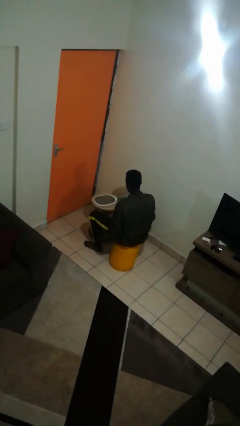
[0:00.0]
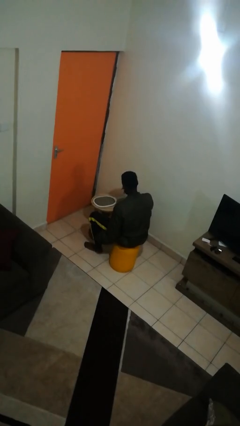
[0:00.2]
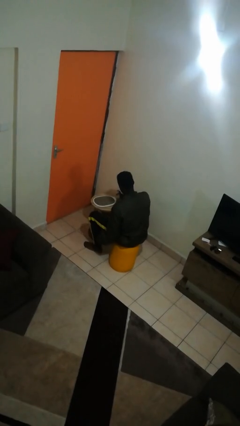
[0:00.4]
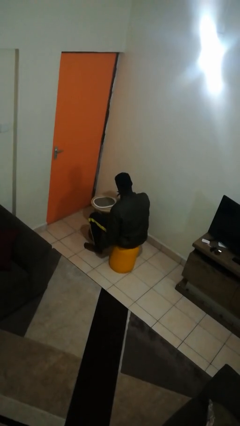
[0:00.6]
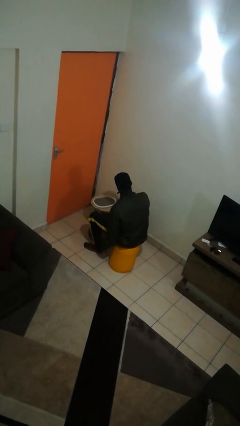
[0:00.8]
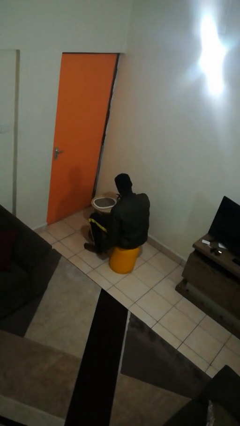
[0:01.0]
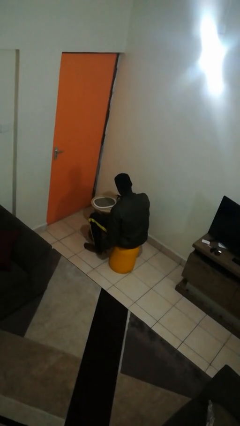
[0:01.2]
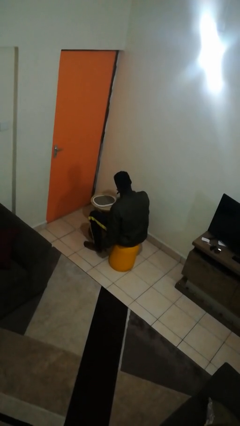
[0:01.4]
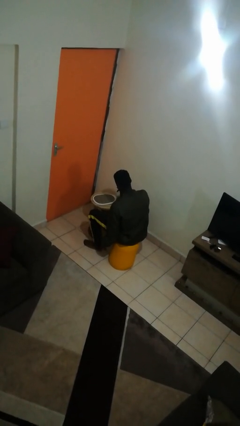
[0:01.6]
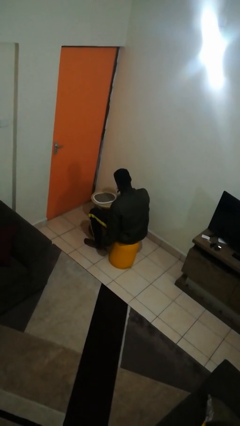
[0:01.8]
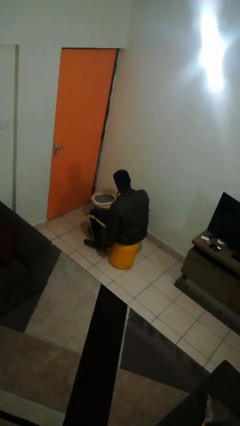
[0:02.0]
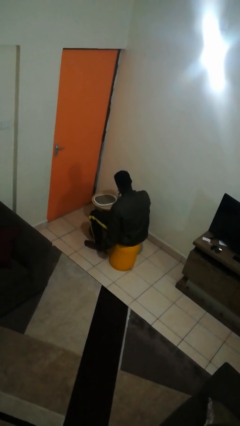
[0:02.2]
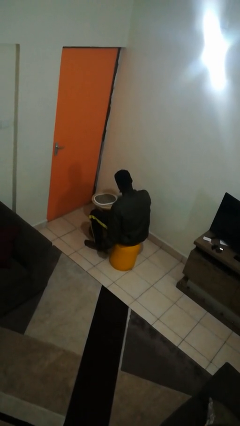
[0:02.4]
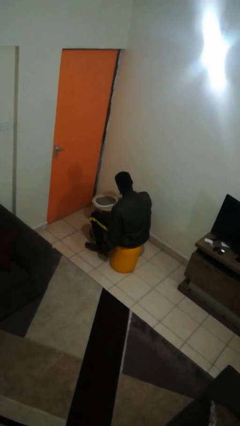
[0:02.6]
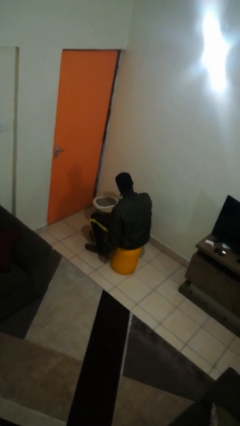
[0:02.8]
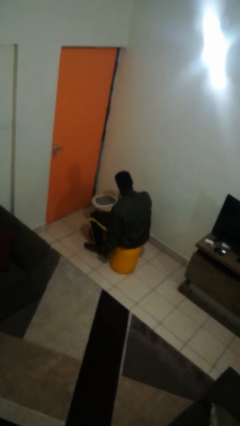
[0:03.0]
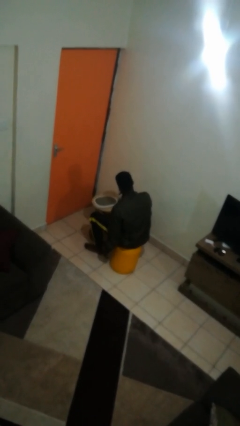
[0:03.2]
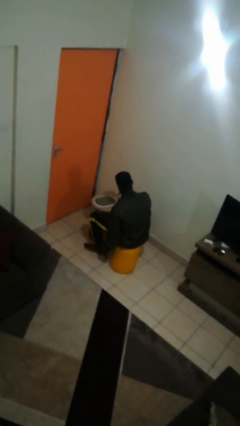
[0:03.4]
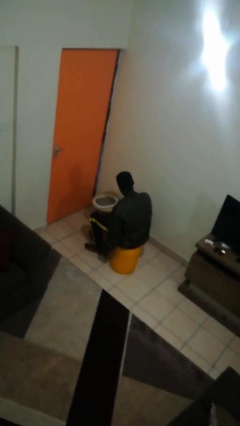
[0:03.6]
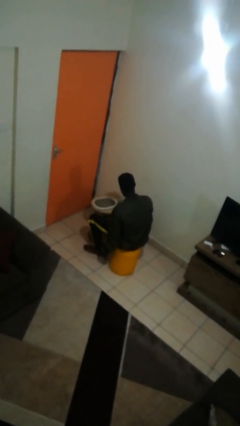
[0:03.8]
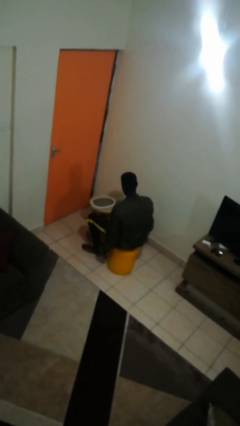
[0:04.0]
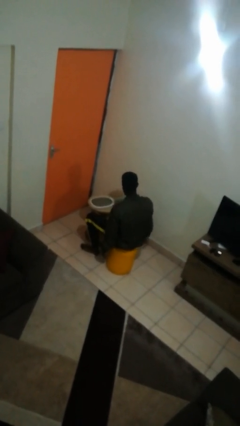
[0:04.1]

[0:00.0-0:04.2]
person taps object with finger

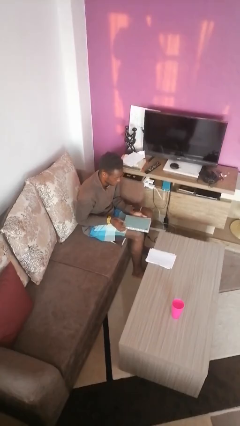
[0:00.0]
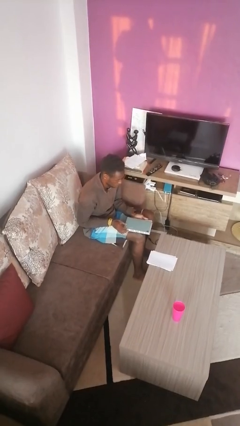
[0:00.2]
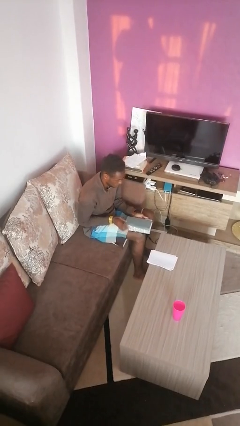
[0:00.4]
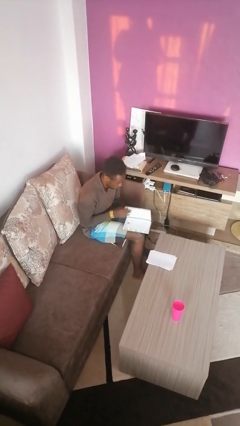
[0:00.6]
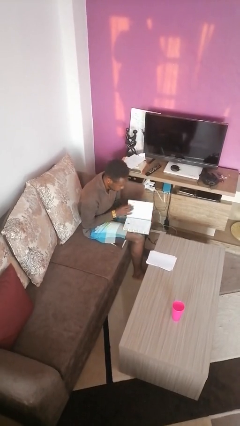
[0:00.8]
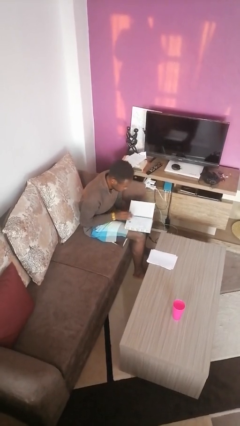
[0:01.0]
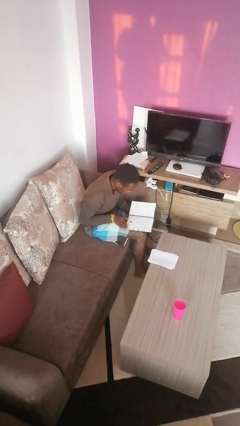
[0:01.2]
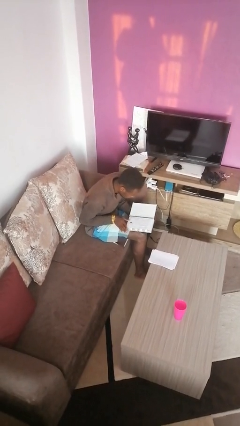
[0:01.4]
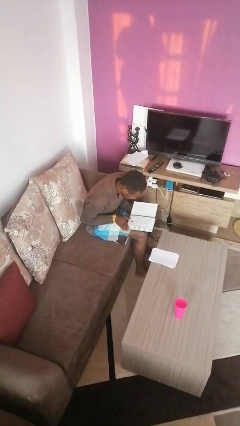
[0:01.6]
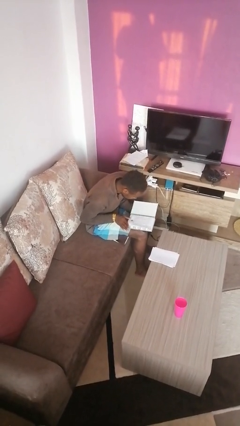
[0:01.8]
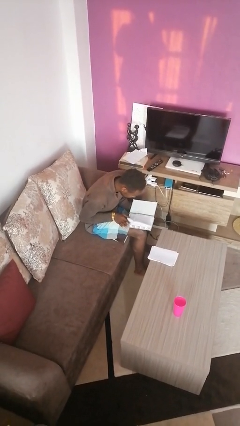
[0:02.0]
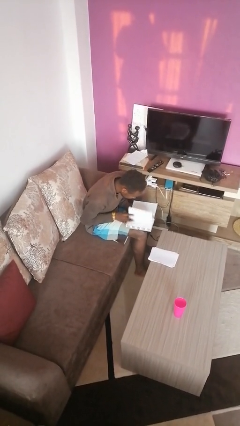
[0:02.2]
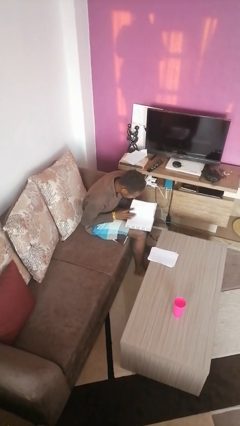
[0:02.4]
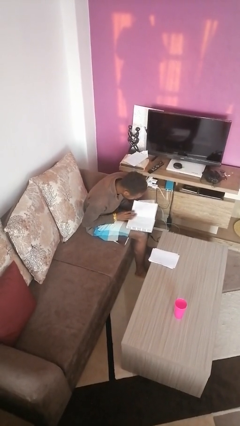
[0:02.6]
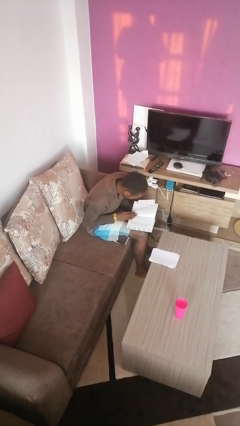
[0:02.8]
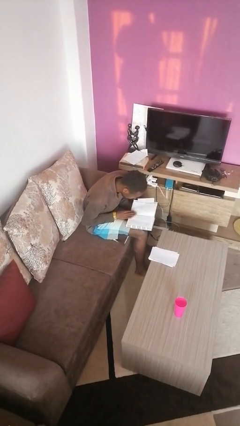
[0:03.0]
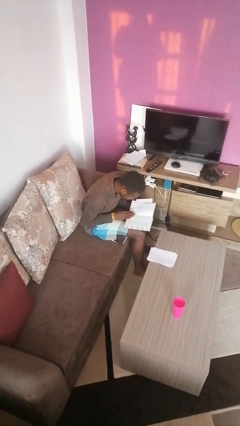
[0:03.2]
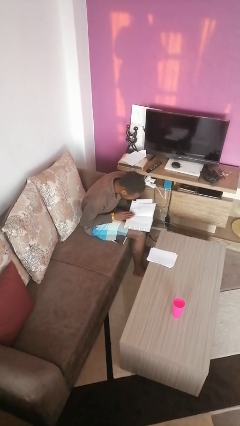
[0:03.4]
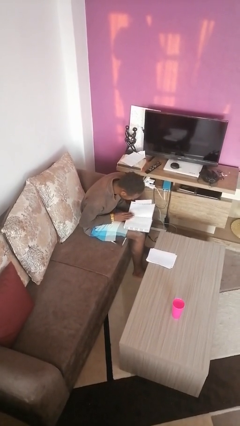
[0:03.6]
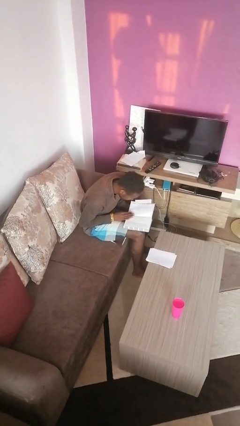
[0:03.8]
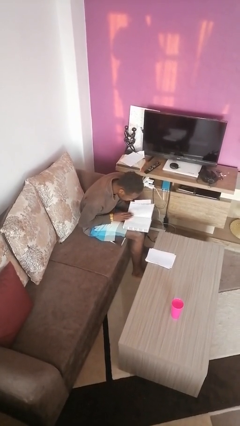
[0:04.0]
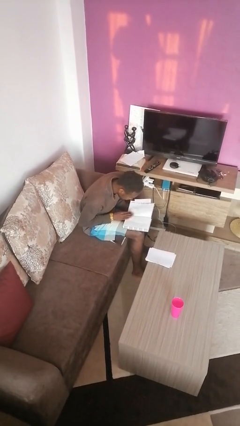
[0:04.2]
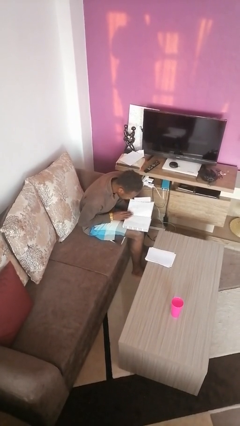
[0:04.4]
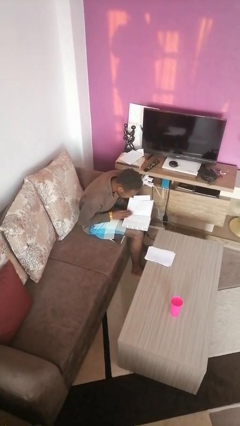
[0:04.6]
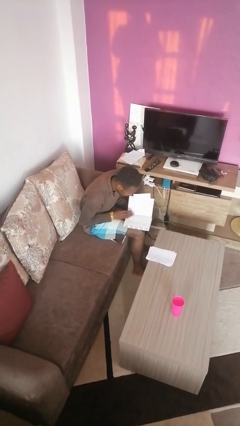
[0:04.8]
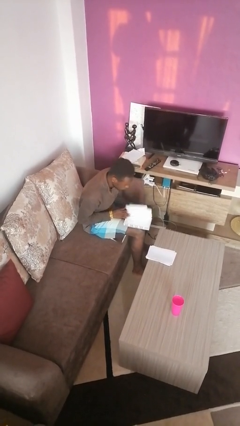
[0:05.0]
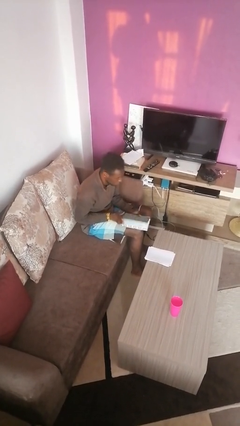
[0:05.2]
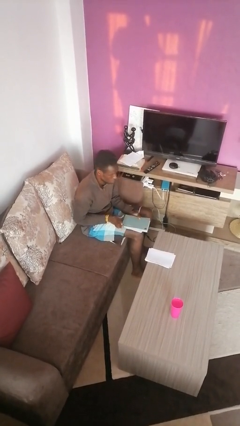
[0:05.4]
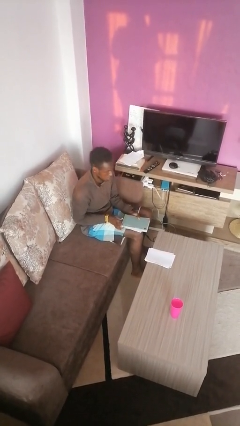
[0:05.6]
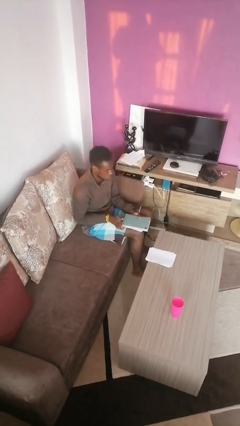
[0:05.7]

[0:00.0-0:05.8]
person reads book

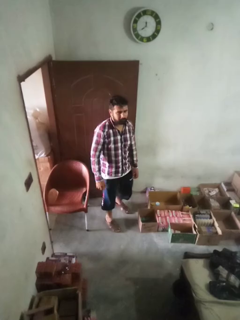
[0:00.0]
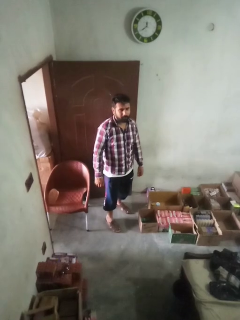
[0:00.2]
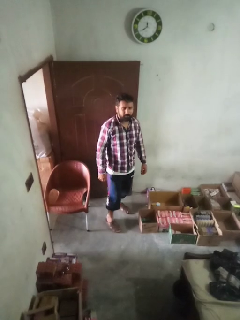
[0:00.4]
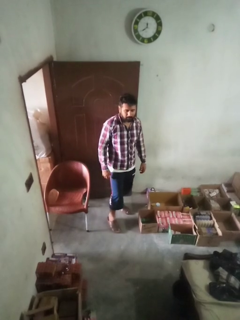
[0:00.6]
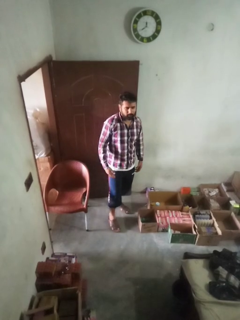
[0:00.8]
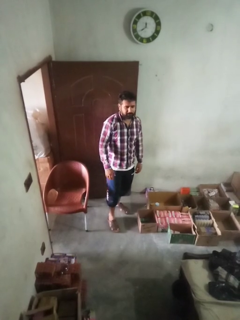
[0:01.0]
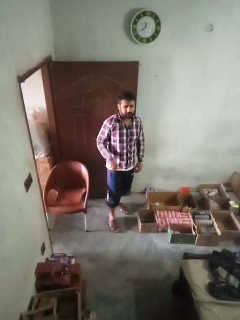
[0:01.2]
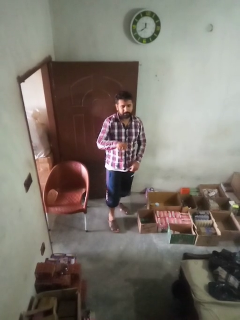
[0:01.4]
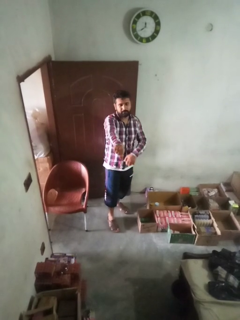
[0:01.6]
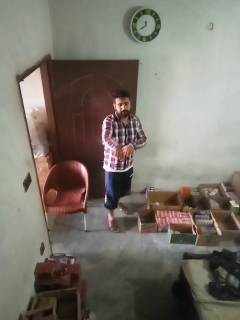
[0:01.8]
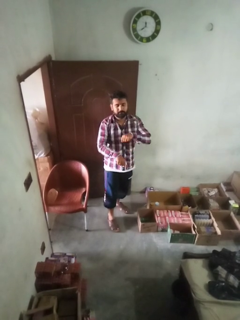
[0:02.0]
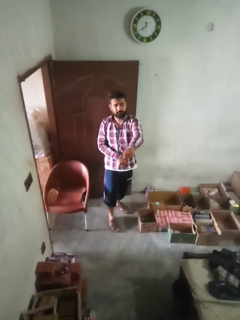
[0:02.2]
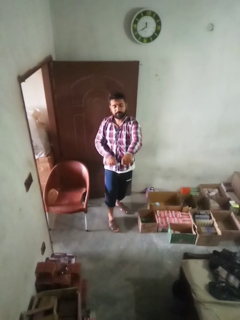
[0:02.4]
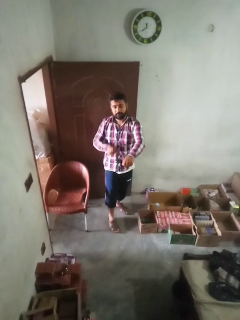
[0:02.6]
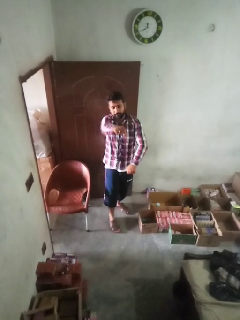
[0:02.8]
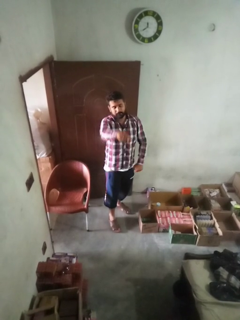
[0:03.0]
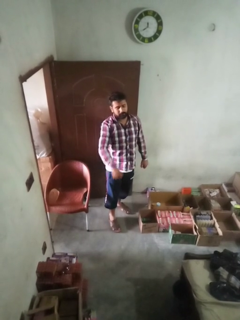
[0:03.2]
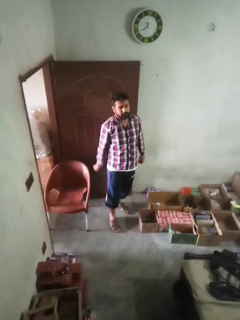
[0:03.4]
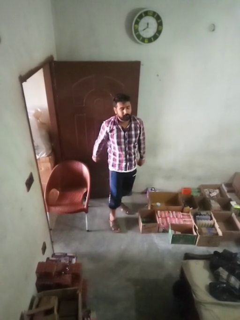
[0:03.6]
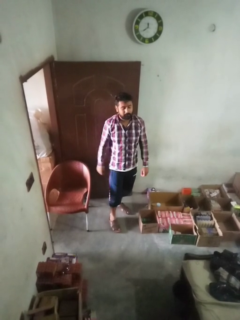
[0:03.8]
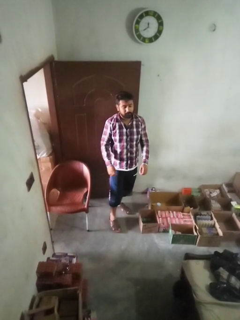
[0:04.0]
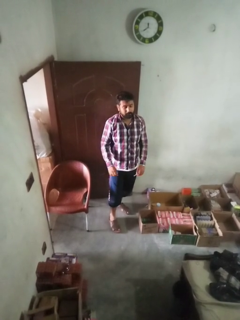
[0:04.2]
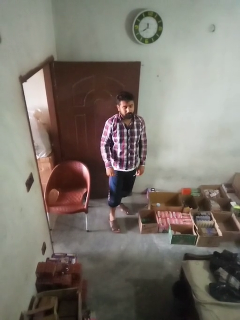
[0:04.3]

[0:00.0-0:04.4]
person karate chop

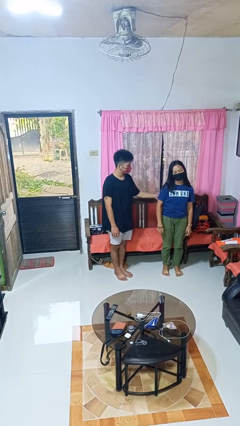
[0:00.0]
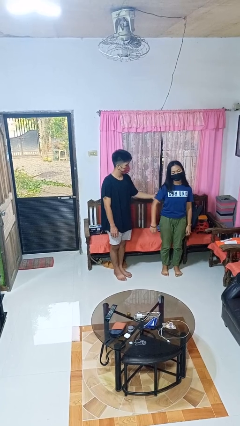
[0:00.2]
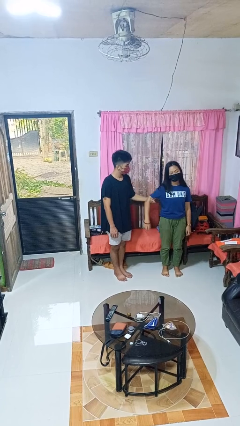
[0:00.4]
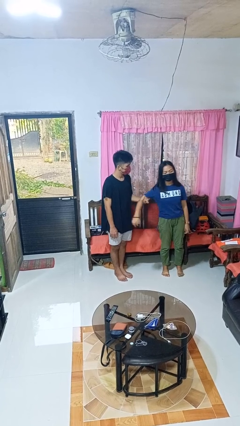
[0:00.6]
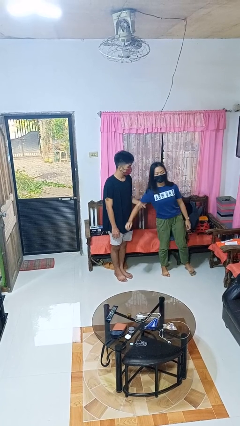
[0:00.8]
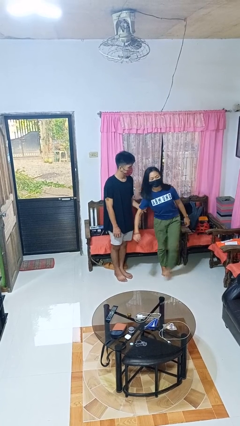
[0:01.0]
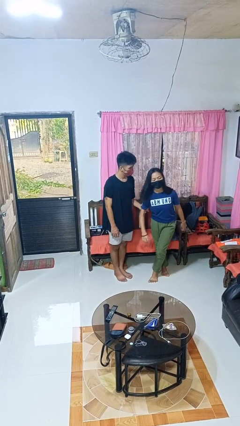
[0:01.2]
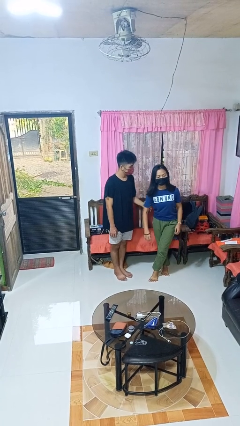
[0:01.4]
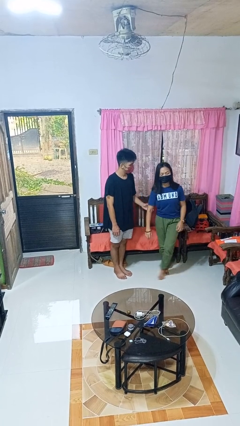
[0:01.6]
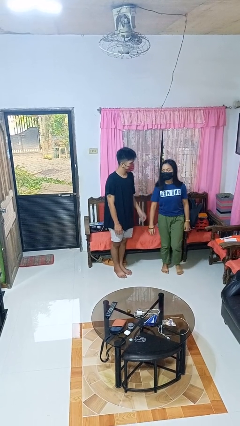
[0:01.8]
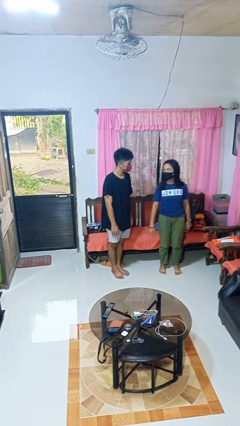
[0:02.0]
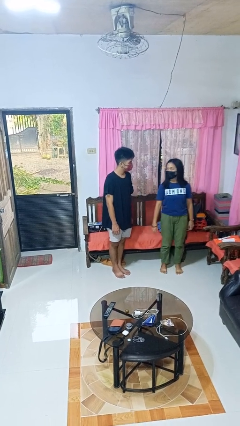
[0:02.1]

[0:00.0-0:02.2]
person grabs person by bicep

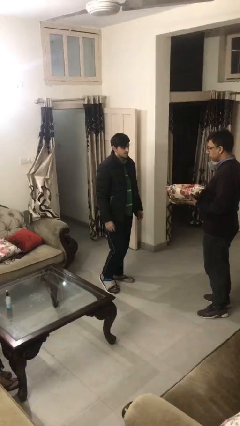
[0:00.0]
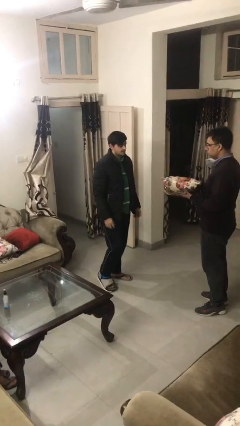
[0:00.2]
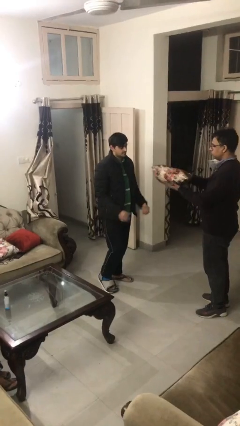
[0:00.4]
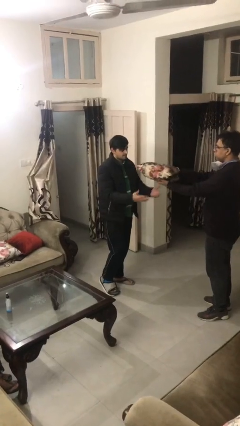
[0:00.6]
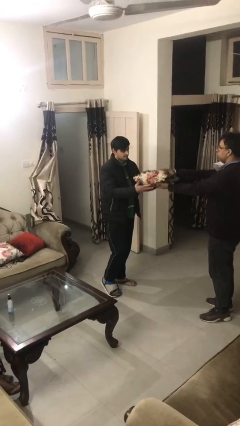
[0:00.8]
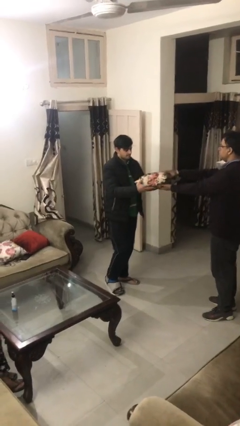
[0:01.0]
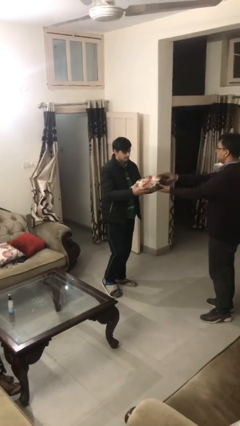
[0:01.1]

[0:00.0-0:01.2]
person transfers object to person

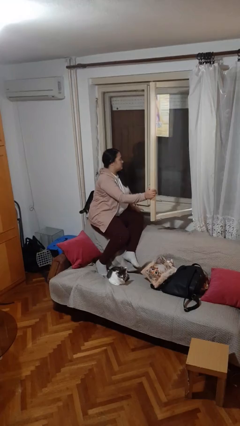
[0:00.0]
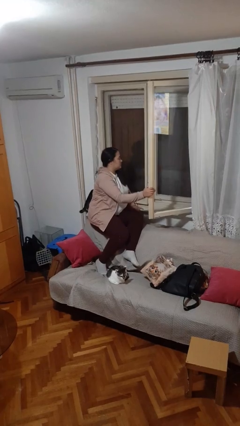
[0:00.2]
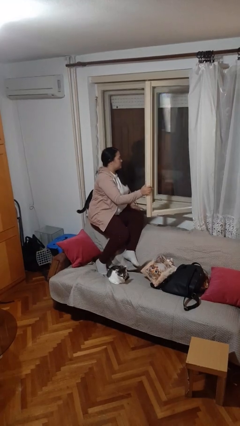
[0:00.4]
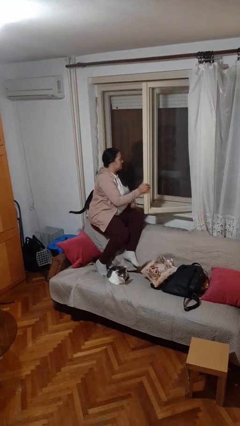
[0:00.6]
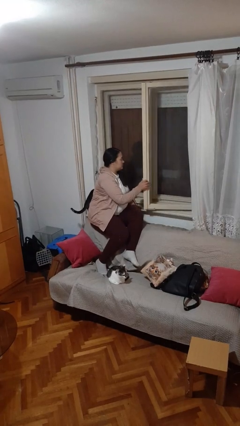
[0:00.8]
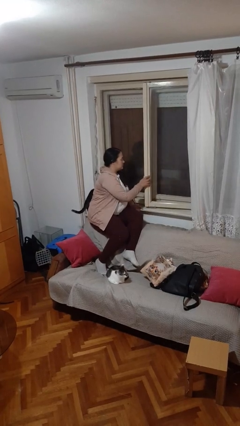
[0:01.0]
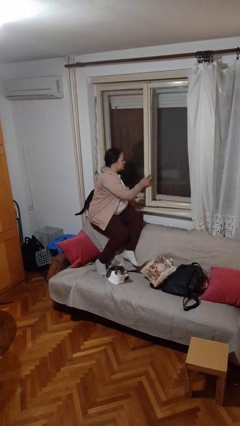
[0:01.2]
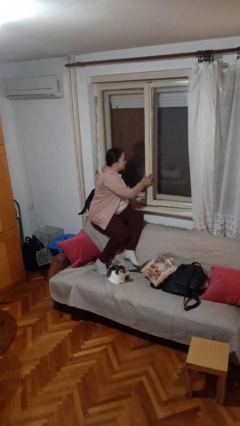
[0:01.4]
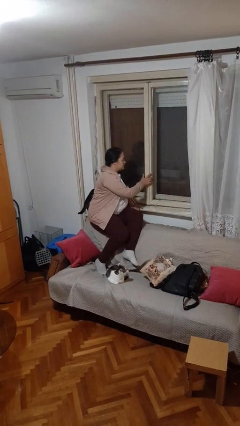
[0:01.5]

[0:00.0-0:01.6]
person closes home window
